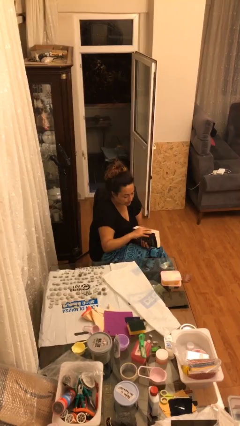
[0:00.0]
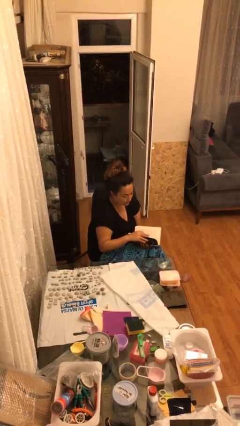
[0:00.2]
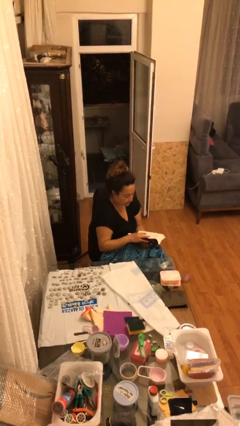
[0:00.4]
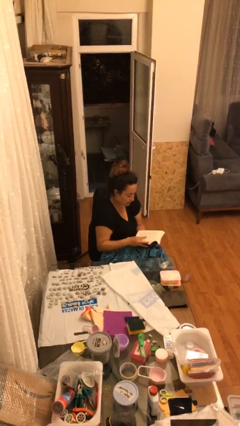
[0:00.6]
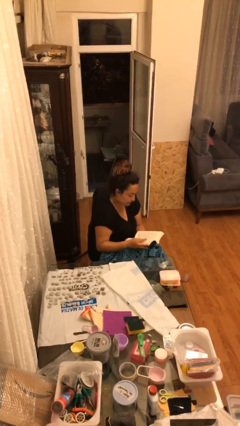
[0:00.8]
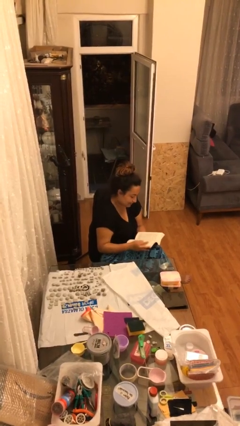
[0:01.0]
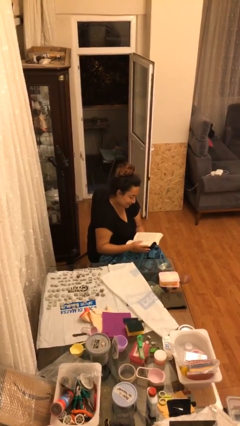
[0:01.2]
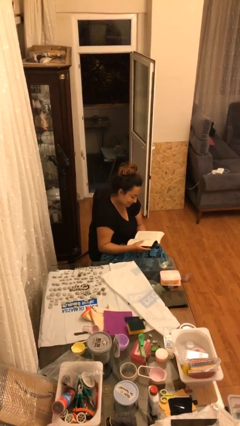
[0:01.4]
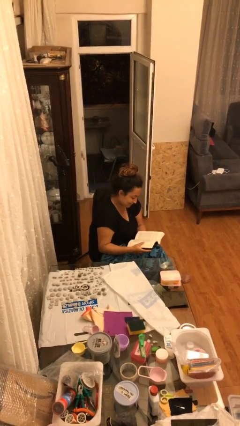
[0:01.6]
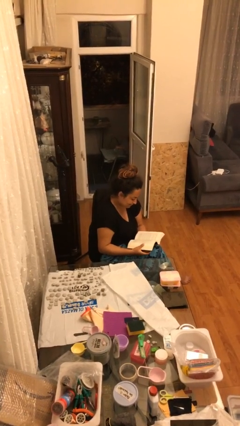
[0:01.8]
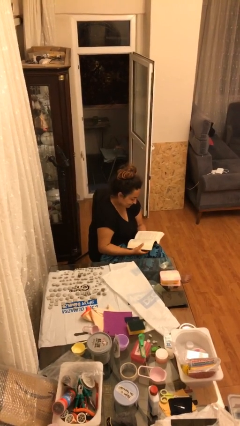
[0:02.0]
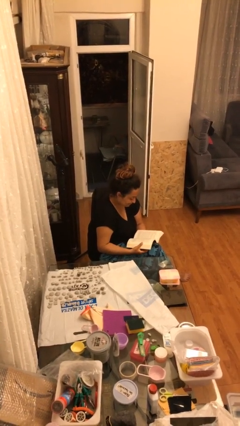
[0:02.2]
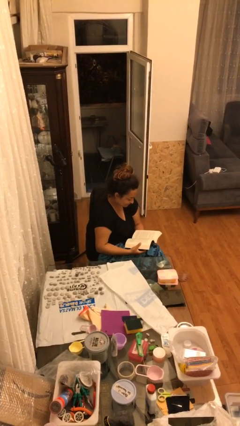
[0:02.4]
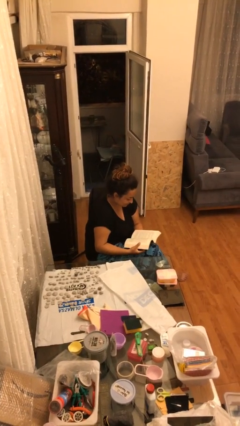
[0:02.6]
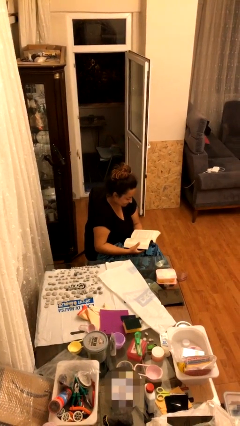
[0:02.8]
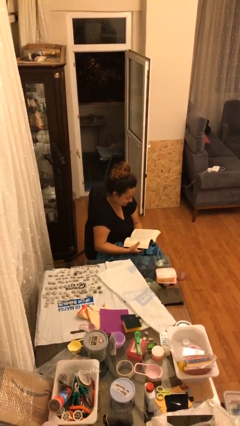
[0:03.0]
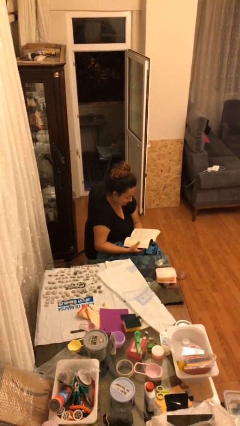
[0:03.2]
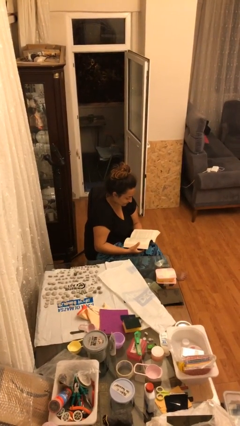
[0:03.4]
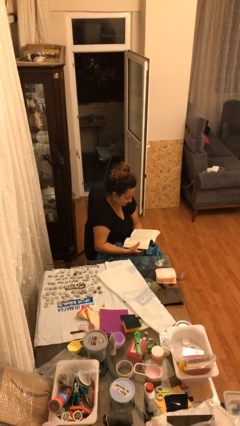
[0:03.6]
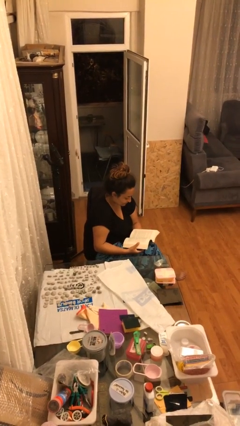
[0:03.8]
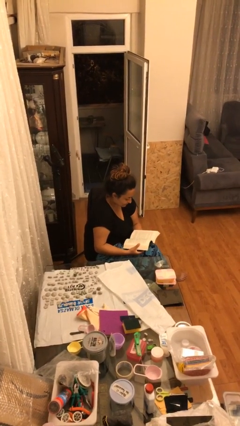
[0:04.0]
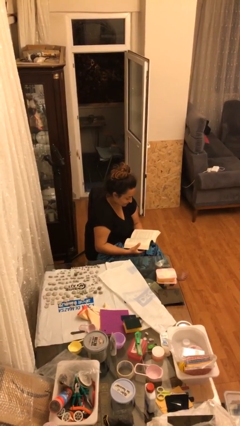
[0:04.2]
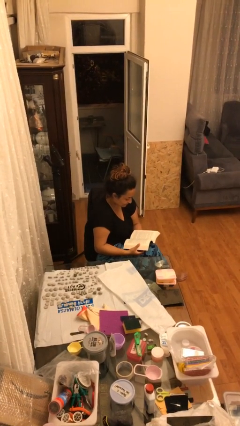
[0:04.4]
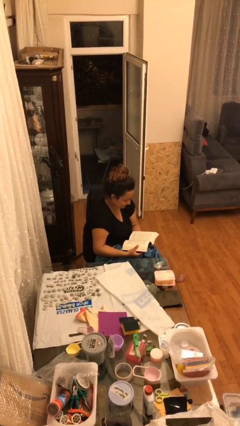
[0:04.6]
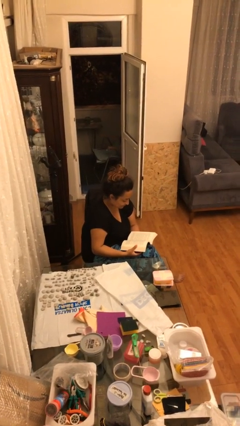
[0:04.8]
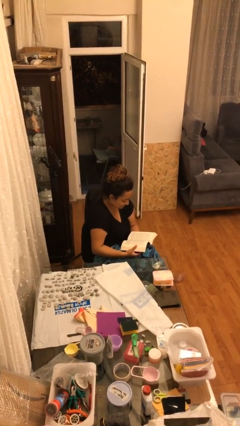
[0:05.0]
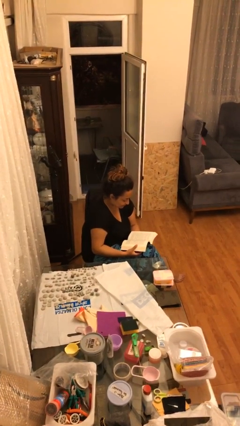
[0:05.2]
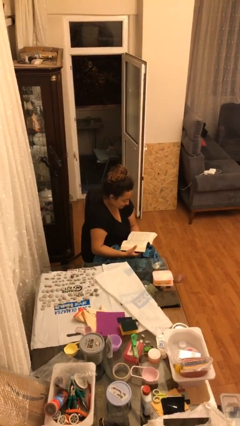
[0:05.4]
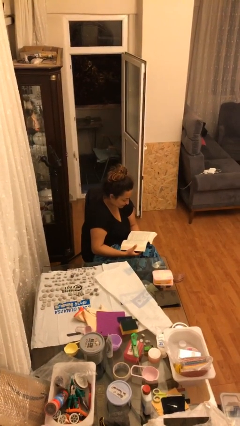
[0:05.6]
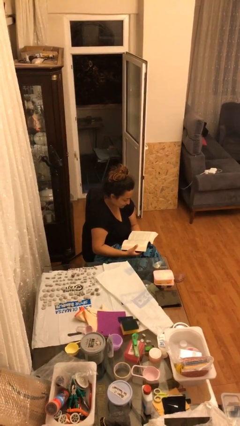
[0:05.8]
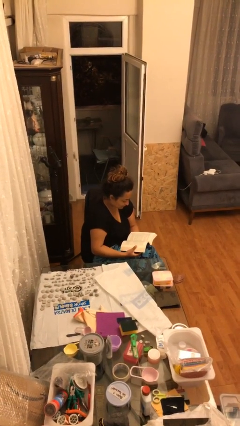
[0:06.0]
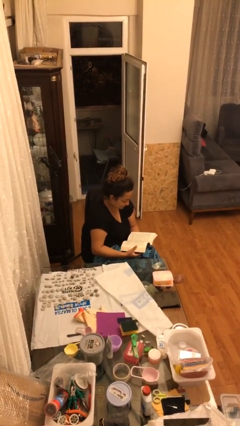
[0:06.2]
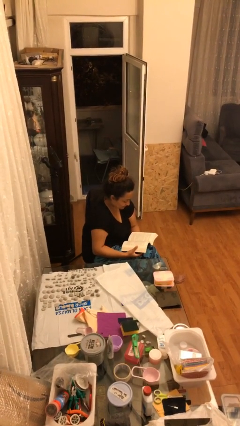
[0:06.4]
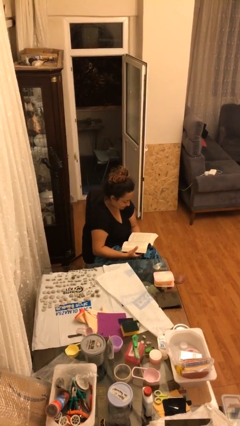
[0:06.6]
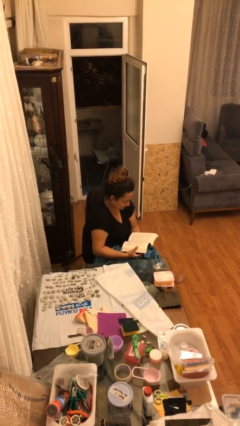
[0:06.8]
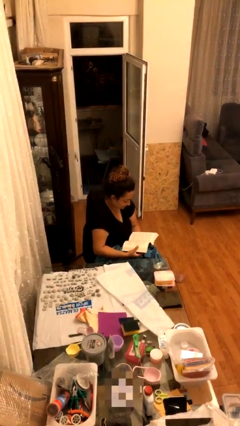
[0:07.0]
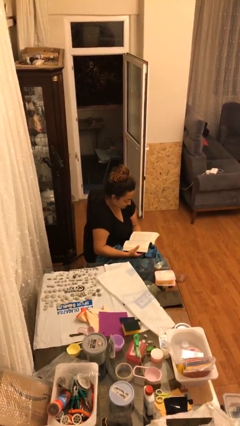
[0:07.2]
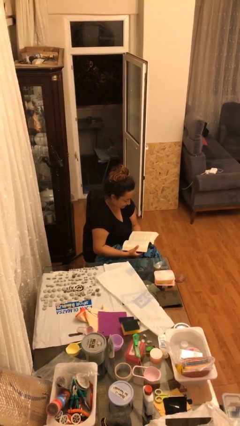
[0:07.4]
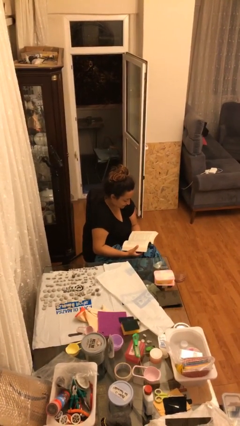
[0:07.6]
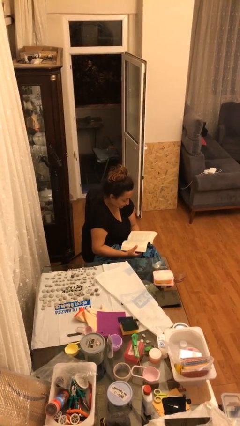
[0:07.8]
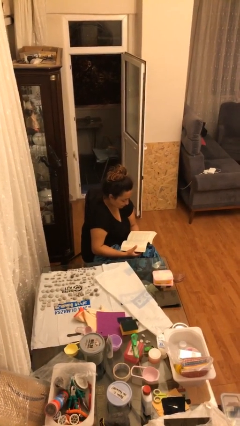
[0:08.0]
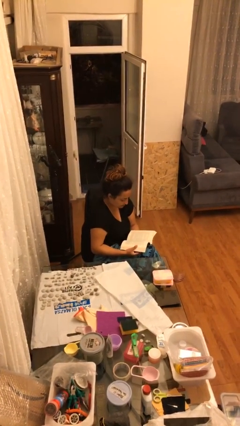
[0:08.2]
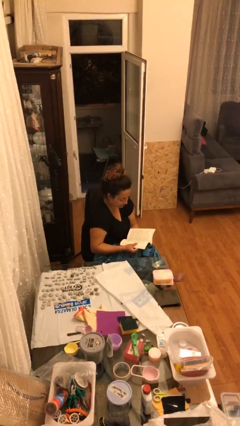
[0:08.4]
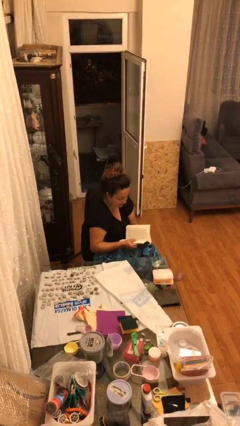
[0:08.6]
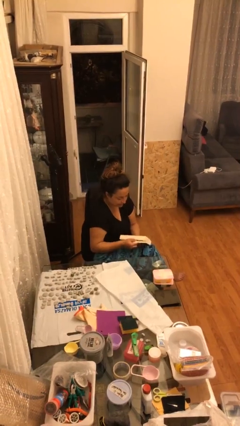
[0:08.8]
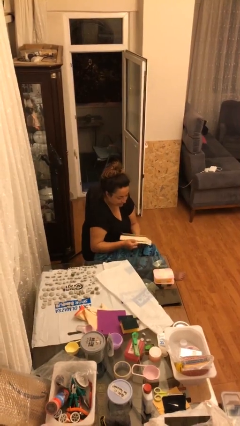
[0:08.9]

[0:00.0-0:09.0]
person reads document

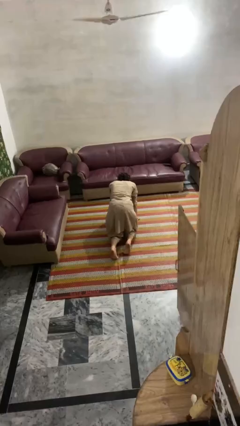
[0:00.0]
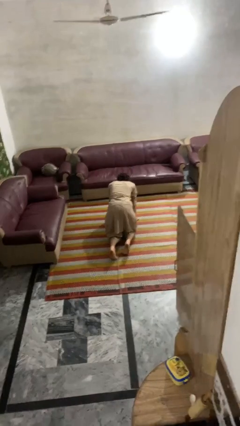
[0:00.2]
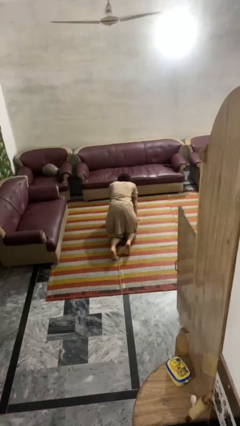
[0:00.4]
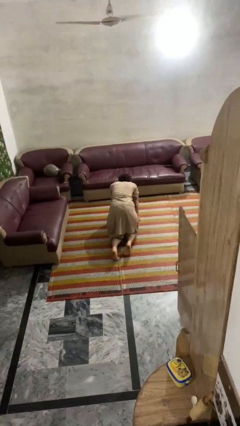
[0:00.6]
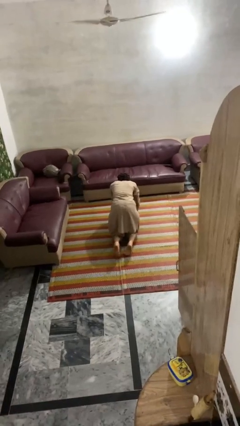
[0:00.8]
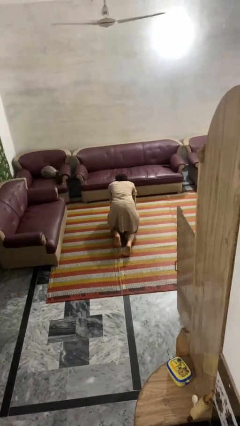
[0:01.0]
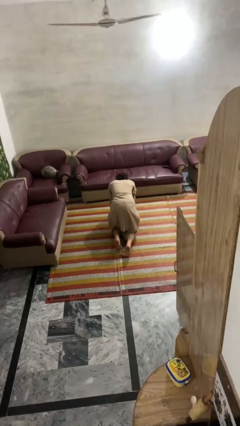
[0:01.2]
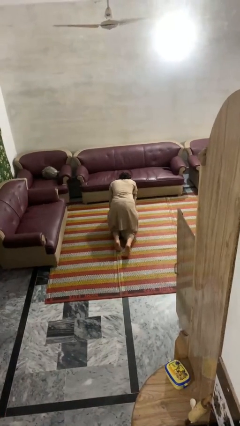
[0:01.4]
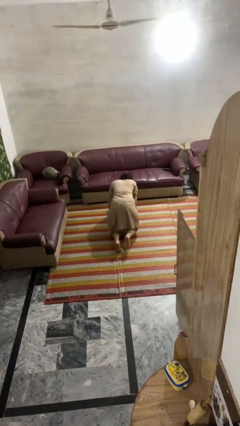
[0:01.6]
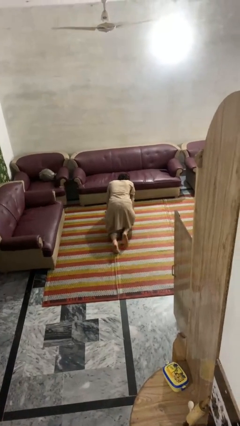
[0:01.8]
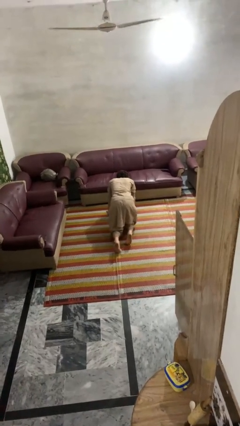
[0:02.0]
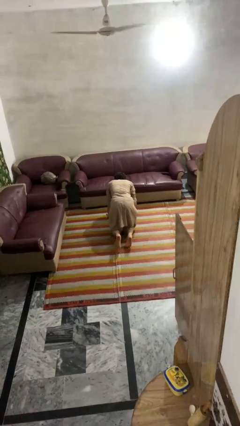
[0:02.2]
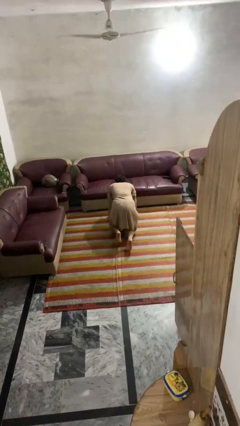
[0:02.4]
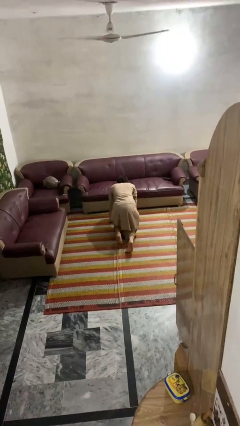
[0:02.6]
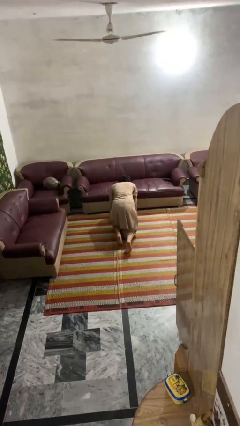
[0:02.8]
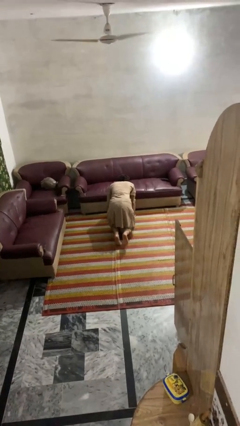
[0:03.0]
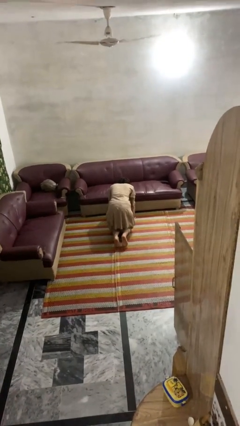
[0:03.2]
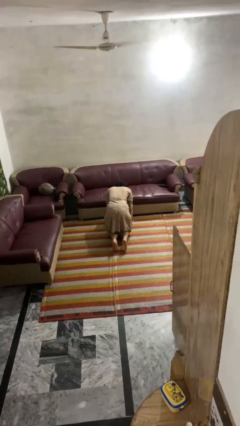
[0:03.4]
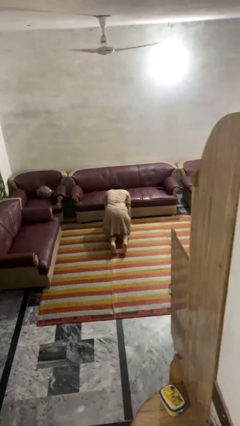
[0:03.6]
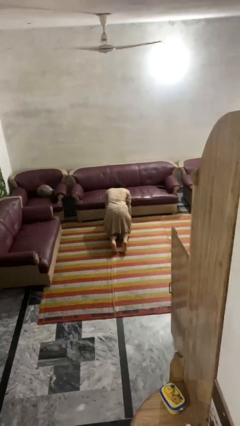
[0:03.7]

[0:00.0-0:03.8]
person crawls

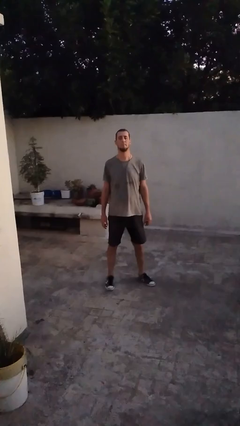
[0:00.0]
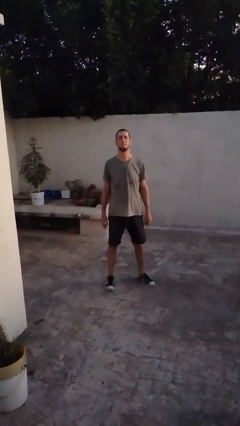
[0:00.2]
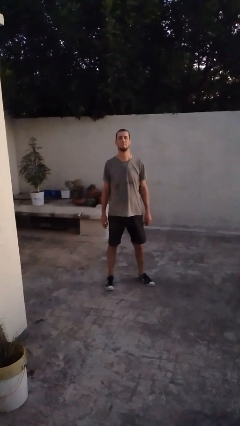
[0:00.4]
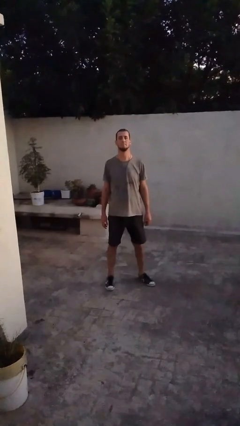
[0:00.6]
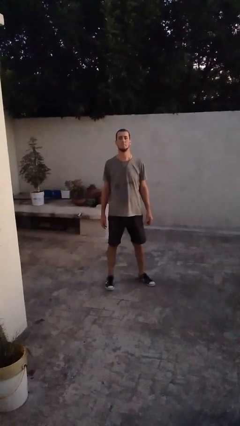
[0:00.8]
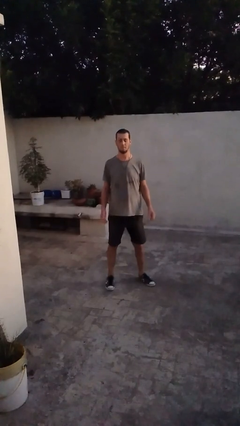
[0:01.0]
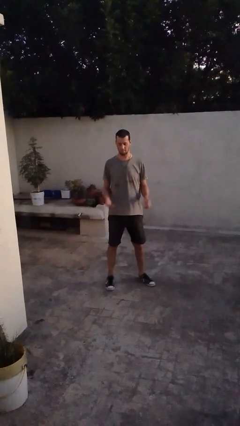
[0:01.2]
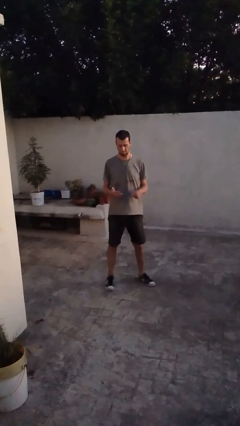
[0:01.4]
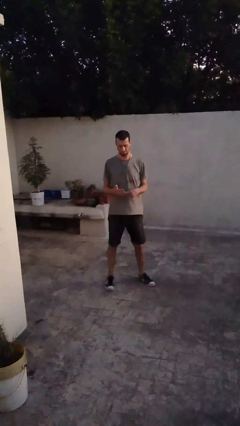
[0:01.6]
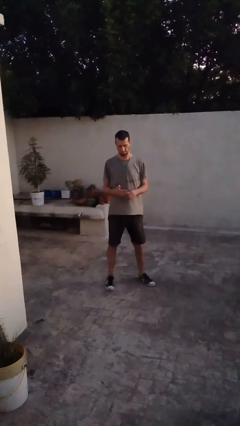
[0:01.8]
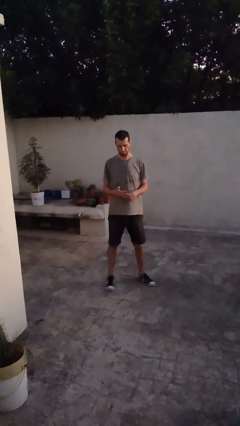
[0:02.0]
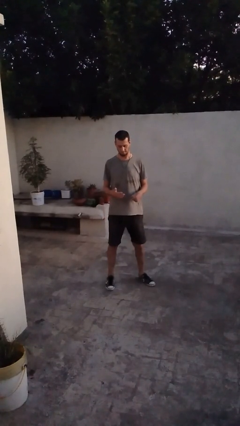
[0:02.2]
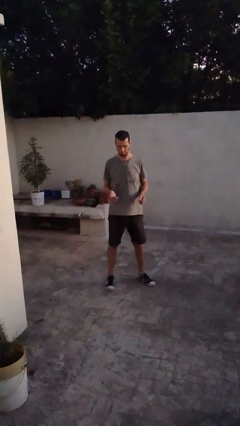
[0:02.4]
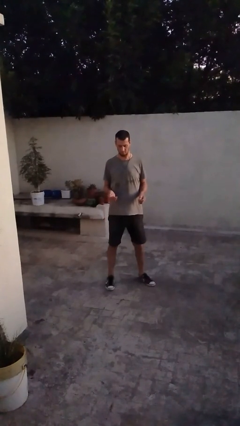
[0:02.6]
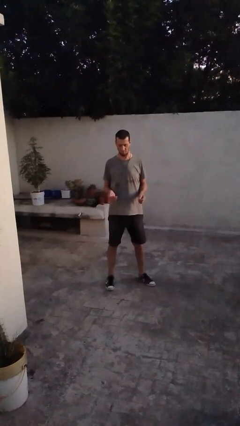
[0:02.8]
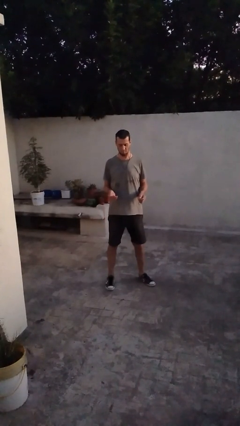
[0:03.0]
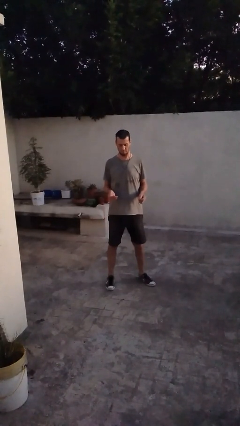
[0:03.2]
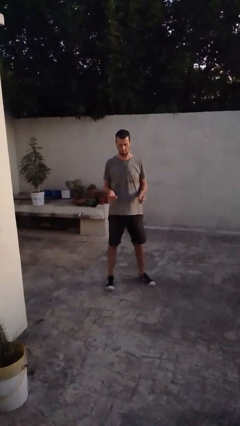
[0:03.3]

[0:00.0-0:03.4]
person puts on ring

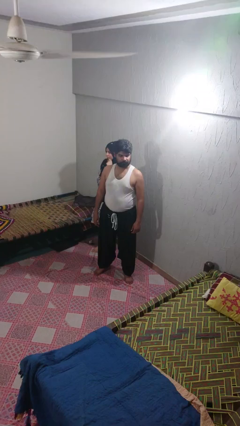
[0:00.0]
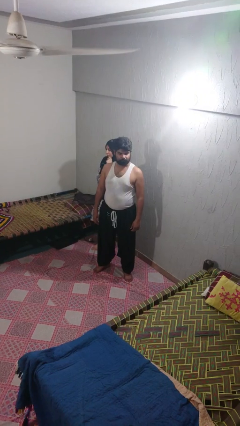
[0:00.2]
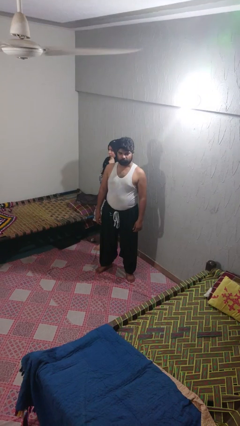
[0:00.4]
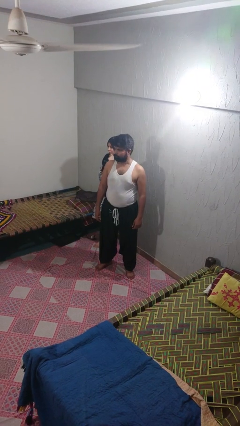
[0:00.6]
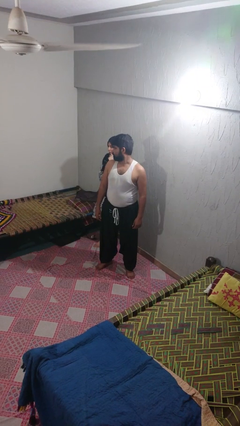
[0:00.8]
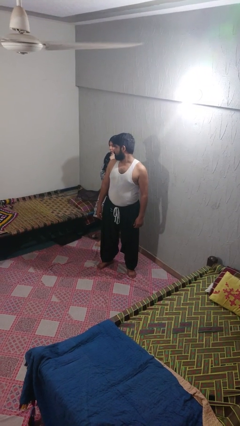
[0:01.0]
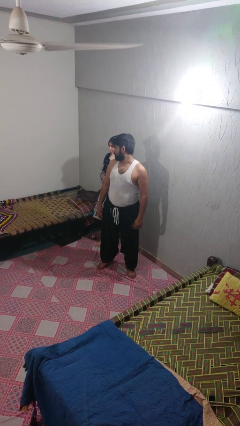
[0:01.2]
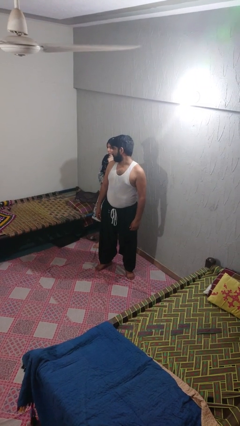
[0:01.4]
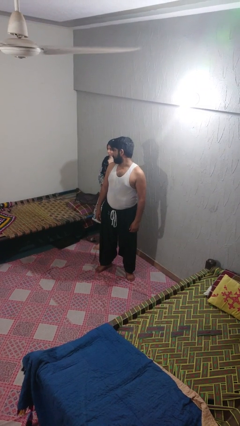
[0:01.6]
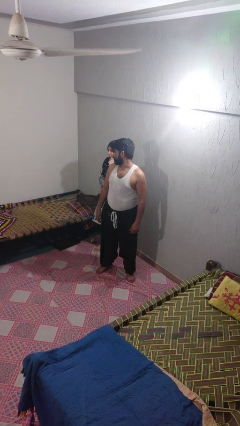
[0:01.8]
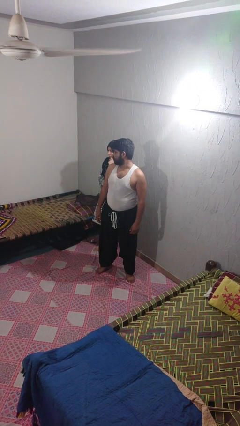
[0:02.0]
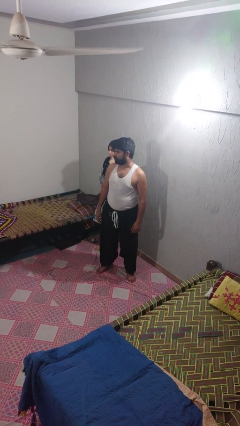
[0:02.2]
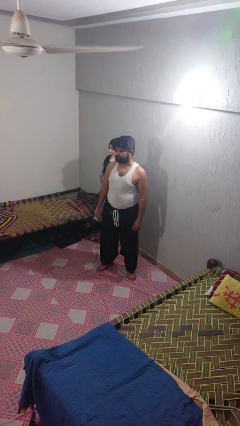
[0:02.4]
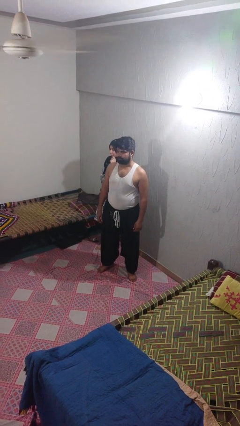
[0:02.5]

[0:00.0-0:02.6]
person looks over shoulder
